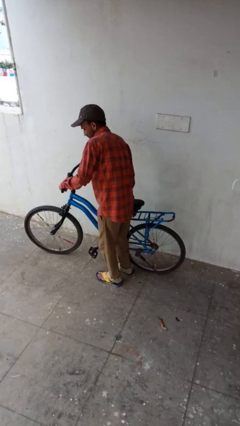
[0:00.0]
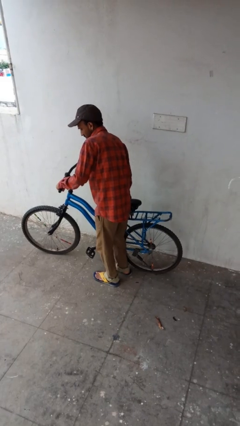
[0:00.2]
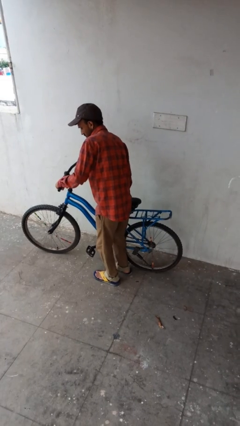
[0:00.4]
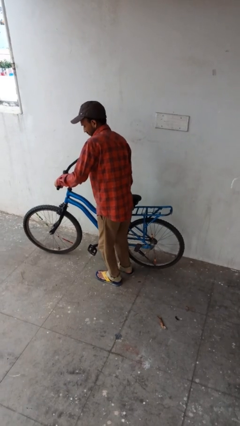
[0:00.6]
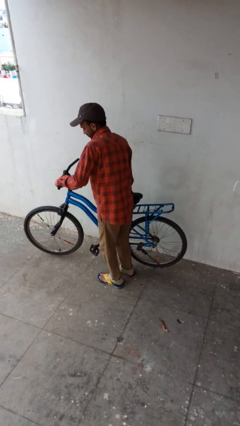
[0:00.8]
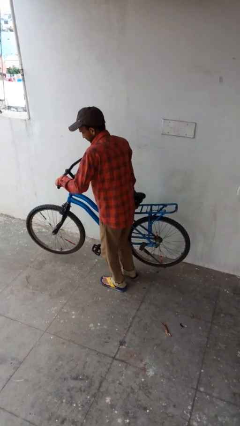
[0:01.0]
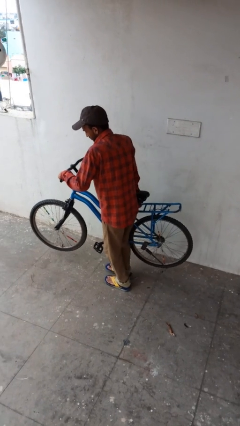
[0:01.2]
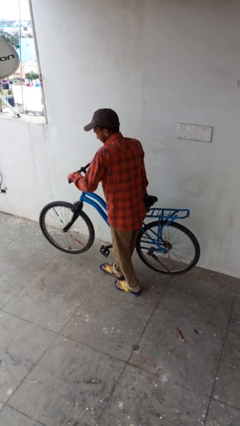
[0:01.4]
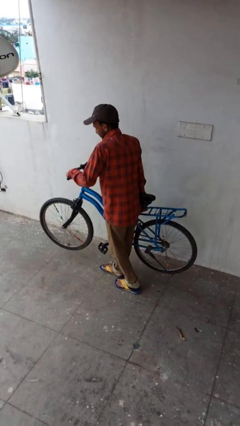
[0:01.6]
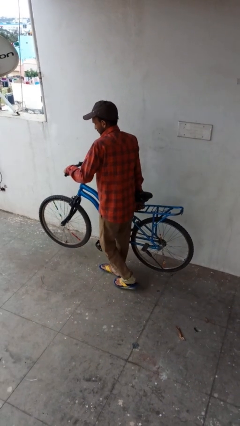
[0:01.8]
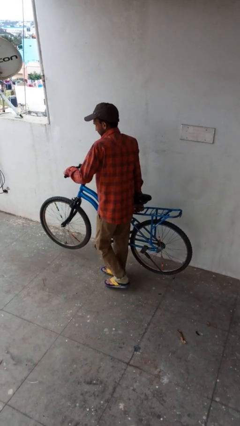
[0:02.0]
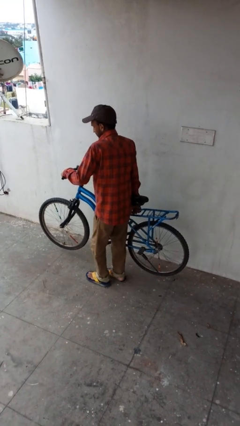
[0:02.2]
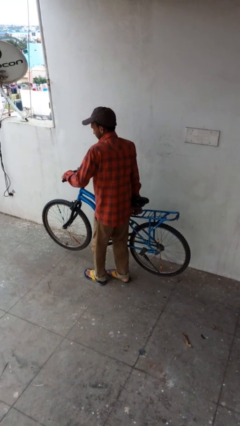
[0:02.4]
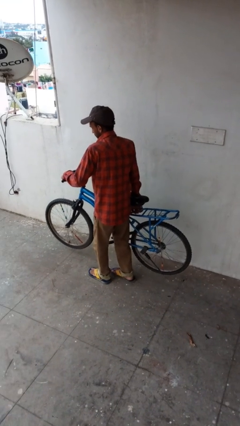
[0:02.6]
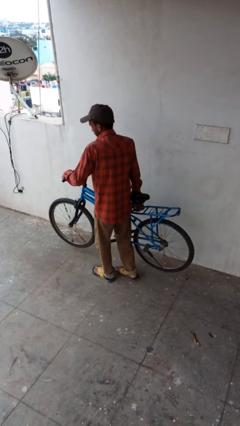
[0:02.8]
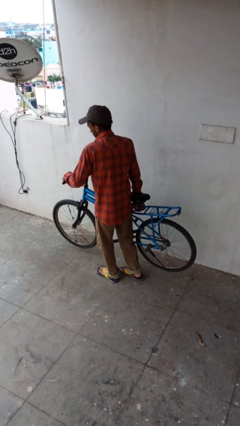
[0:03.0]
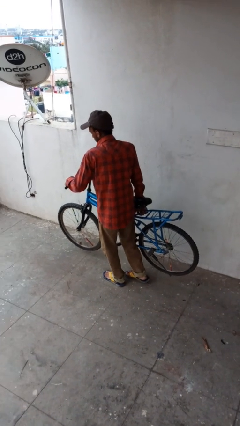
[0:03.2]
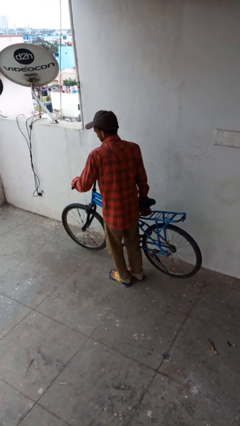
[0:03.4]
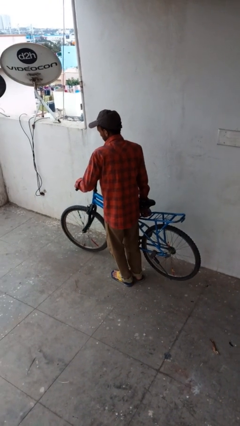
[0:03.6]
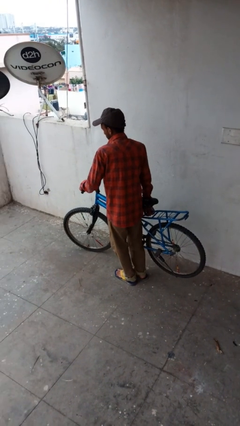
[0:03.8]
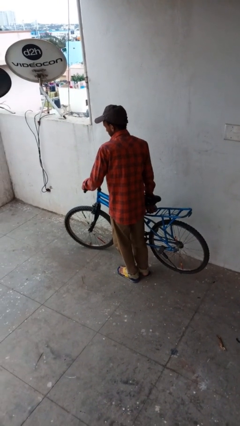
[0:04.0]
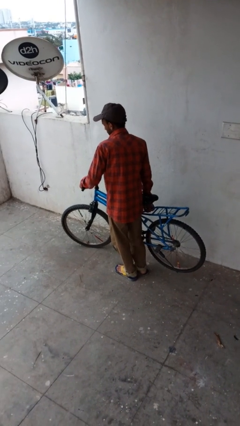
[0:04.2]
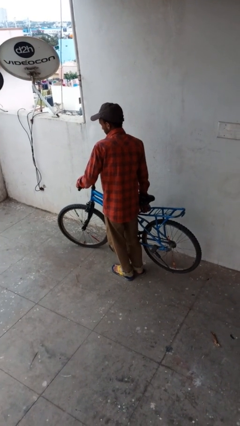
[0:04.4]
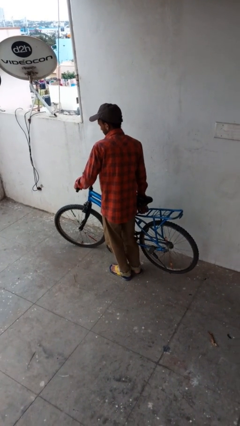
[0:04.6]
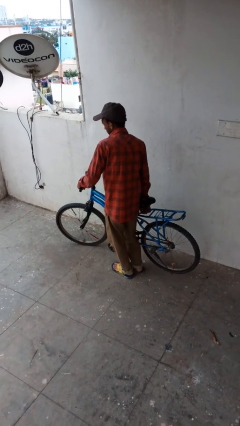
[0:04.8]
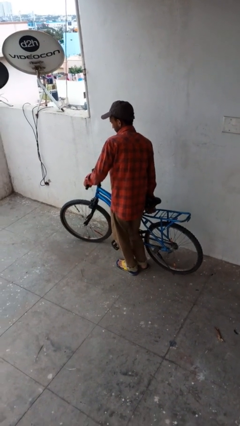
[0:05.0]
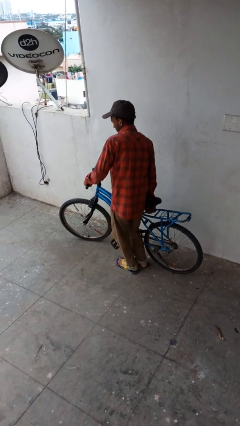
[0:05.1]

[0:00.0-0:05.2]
person carries bicycle

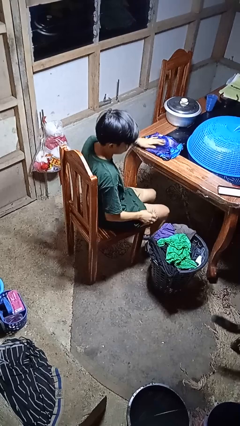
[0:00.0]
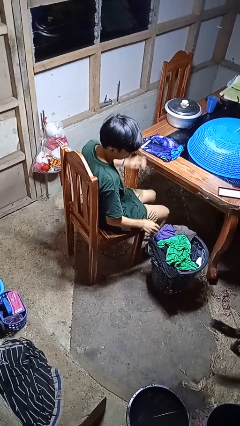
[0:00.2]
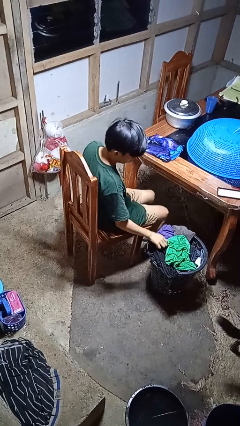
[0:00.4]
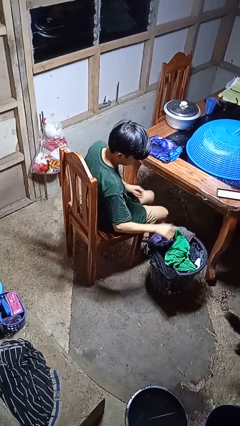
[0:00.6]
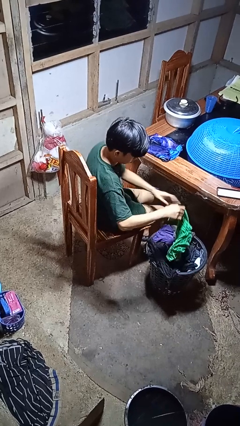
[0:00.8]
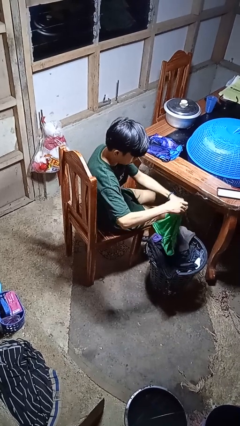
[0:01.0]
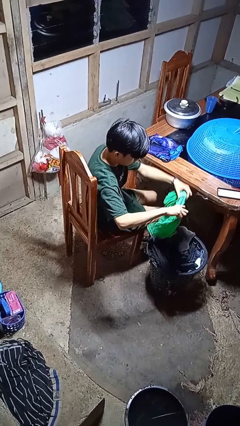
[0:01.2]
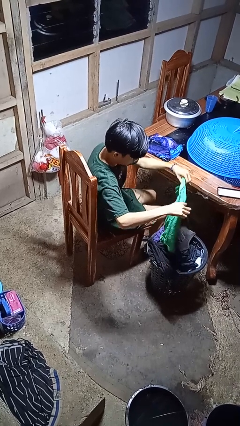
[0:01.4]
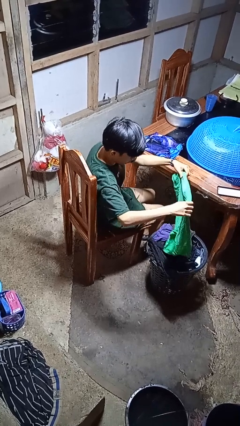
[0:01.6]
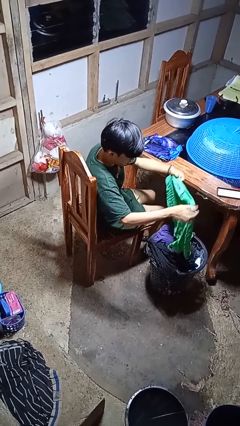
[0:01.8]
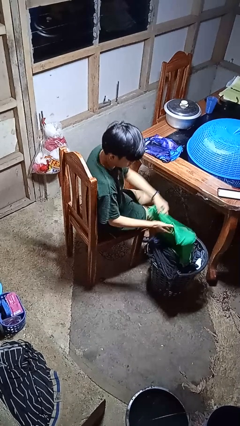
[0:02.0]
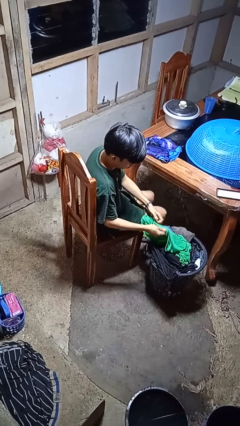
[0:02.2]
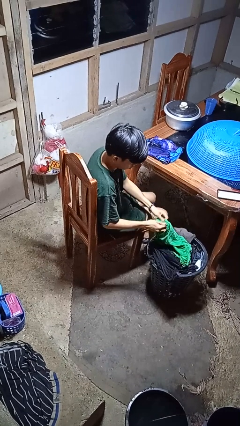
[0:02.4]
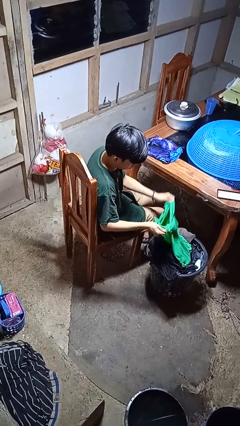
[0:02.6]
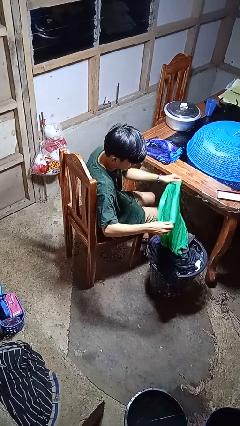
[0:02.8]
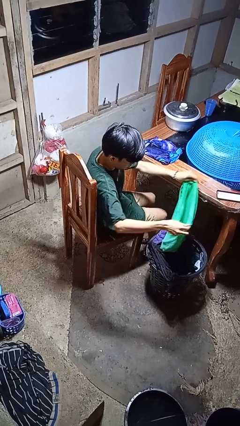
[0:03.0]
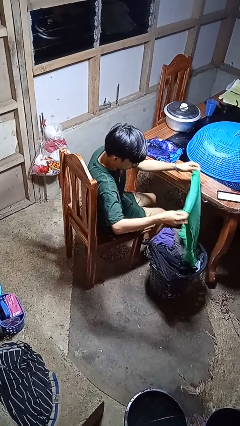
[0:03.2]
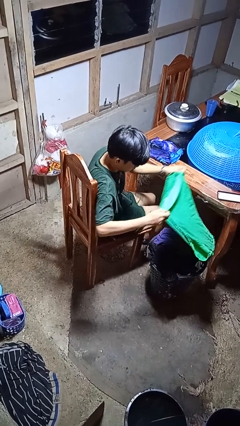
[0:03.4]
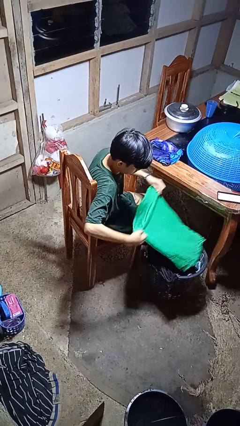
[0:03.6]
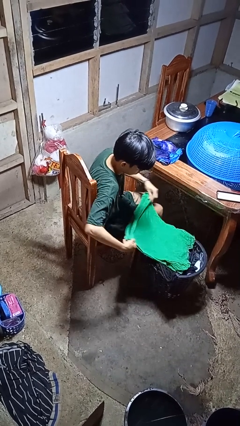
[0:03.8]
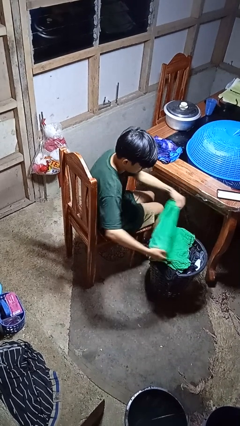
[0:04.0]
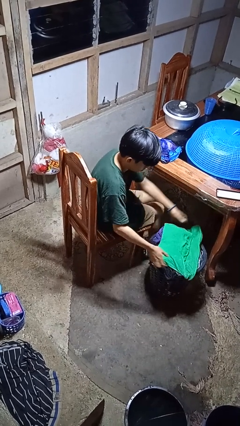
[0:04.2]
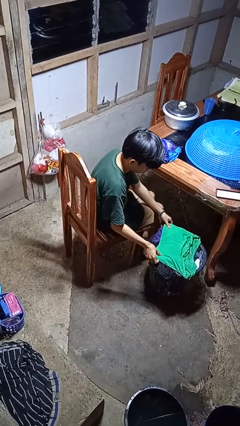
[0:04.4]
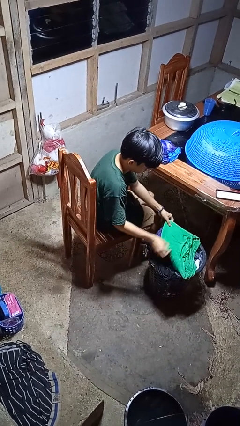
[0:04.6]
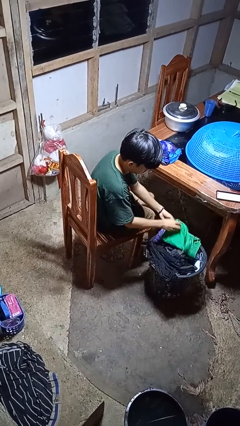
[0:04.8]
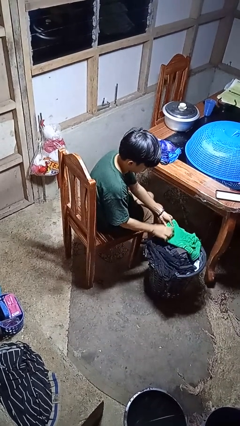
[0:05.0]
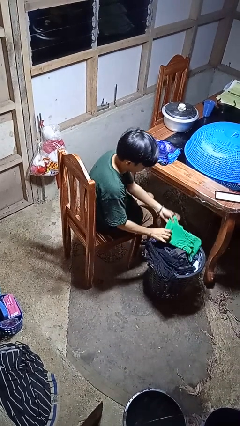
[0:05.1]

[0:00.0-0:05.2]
person folds shirt

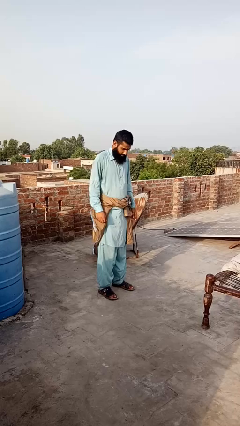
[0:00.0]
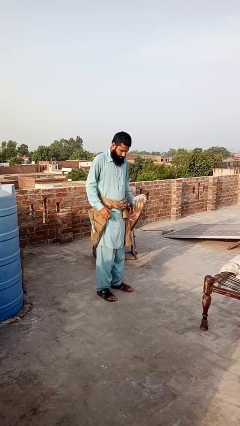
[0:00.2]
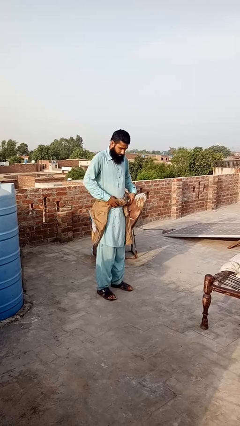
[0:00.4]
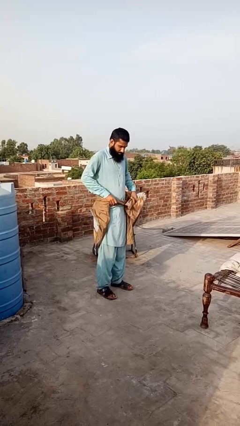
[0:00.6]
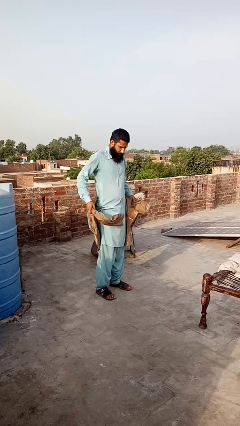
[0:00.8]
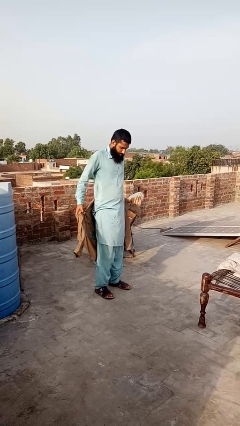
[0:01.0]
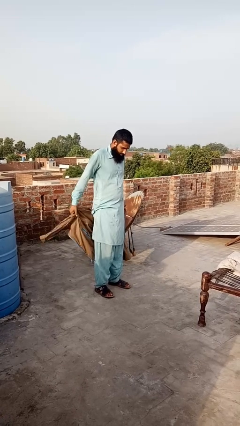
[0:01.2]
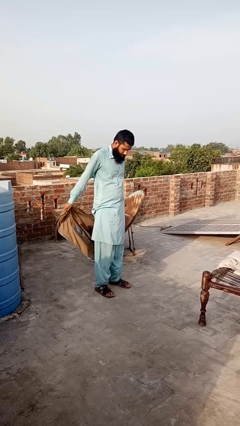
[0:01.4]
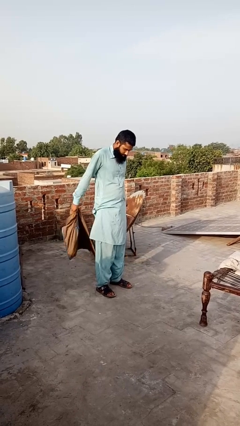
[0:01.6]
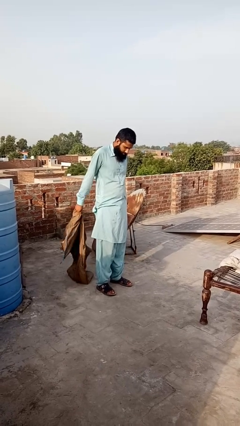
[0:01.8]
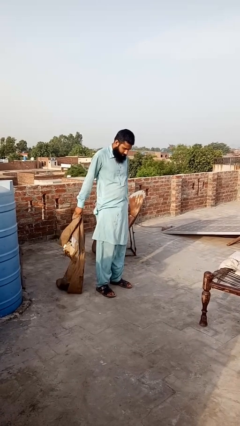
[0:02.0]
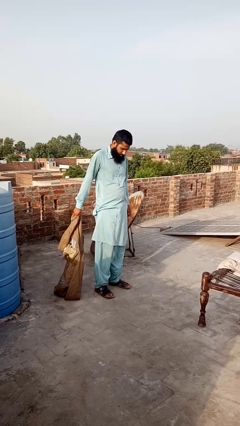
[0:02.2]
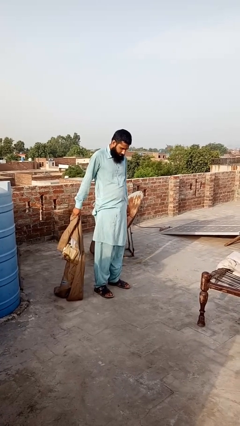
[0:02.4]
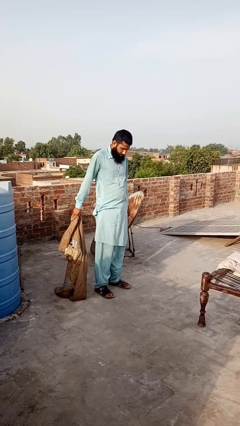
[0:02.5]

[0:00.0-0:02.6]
person unties jacket around waist

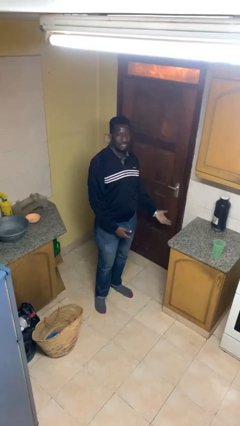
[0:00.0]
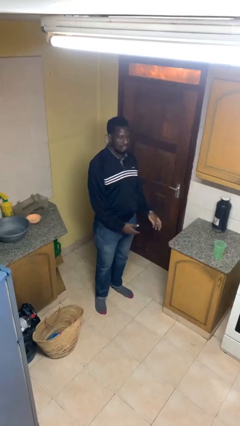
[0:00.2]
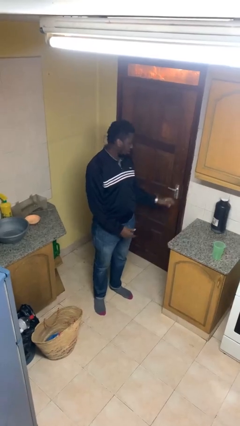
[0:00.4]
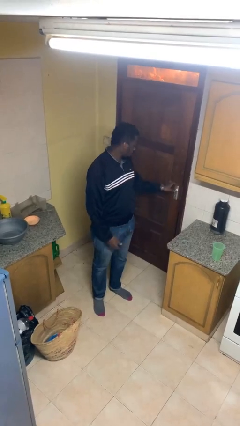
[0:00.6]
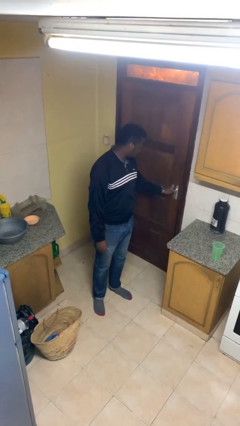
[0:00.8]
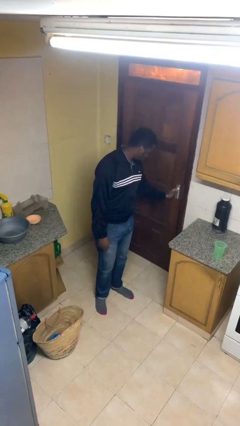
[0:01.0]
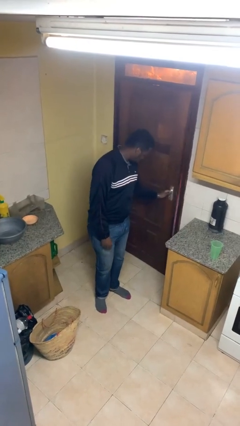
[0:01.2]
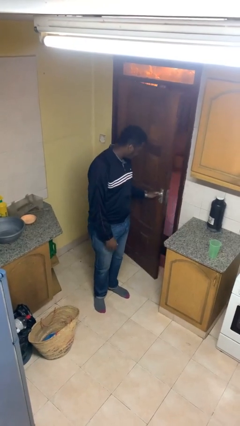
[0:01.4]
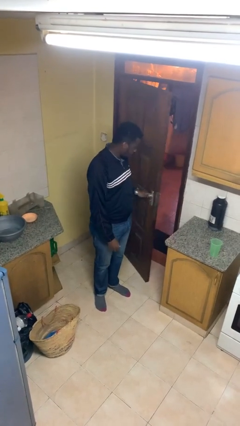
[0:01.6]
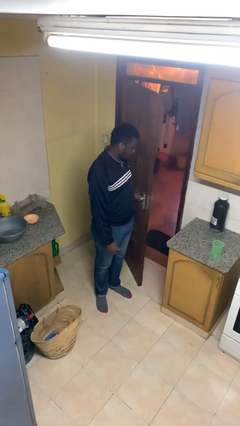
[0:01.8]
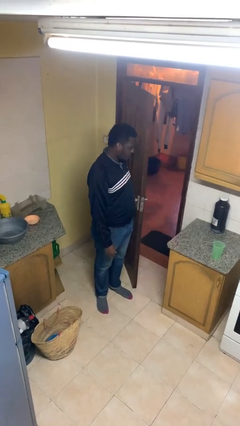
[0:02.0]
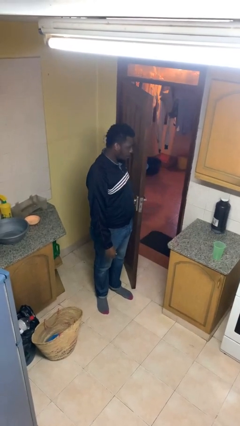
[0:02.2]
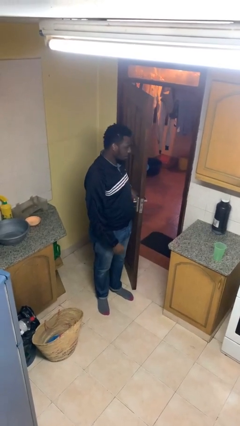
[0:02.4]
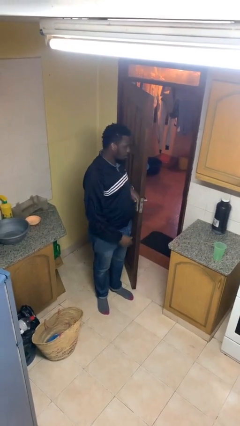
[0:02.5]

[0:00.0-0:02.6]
person opens facility door

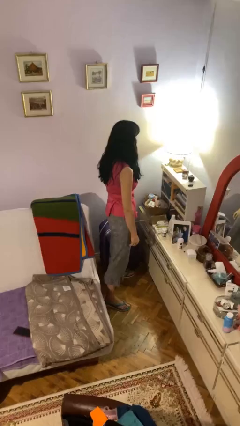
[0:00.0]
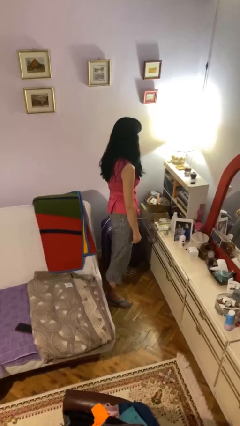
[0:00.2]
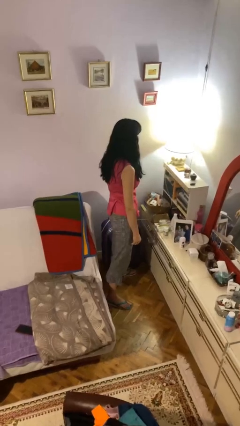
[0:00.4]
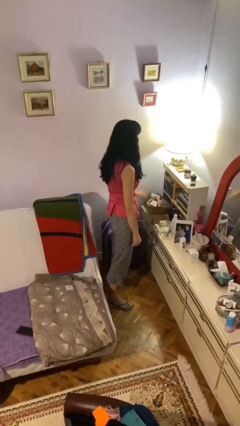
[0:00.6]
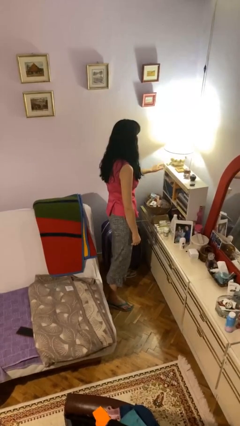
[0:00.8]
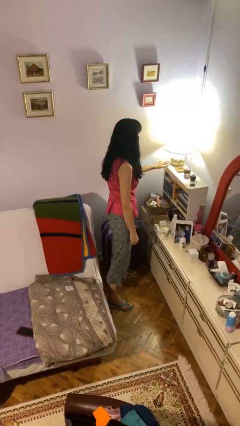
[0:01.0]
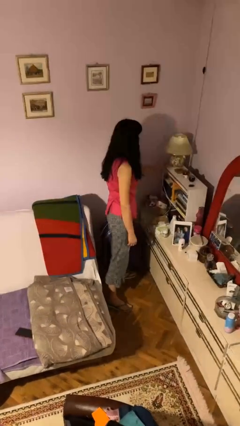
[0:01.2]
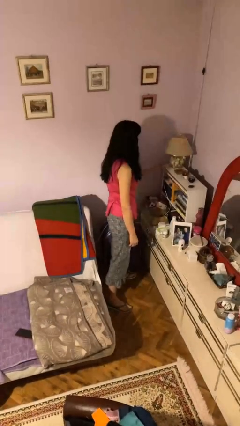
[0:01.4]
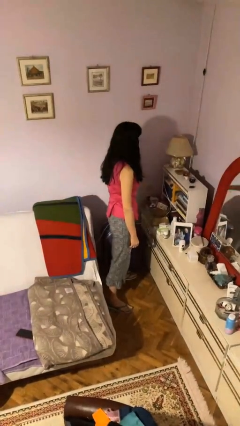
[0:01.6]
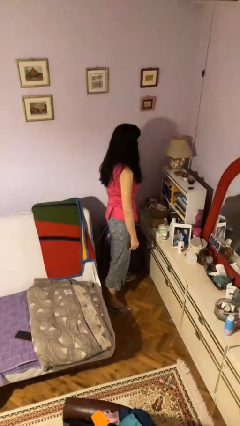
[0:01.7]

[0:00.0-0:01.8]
person turns off lamp

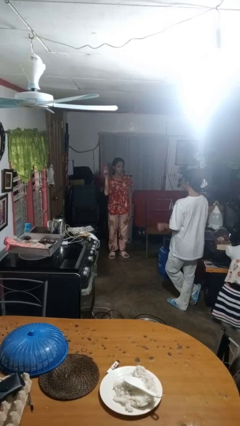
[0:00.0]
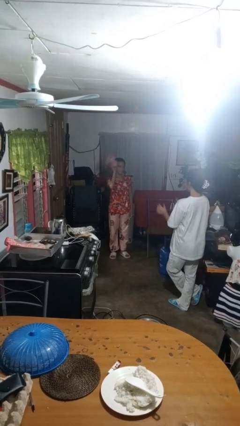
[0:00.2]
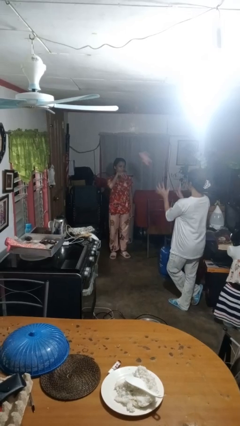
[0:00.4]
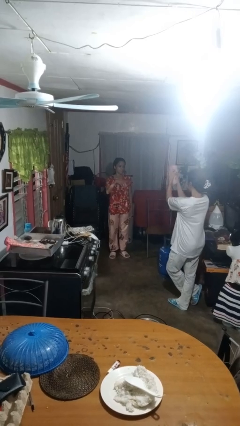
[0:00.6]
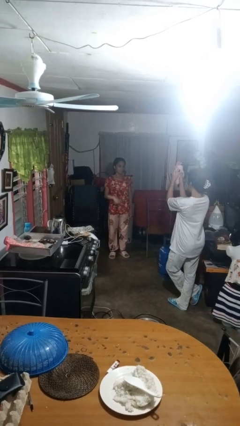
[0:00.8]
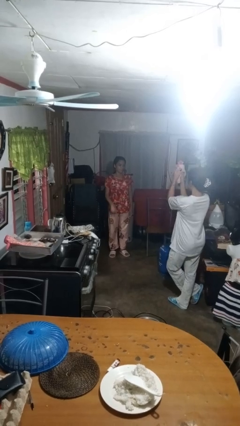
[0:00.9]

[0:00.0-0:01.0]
person throws object to person
